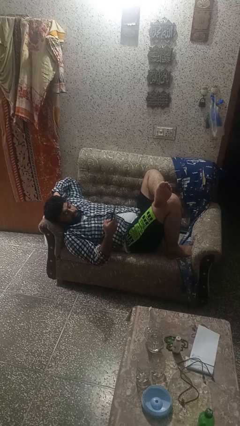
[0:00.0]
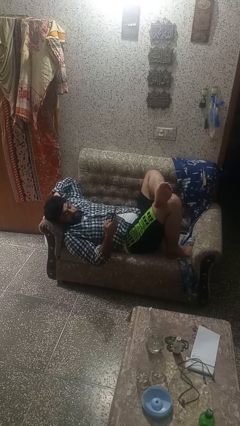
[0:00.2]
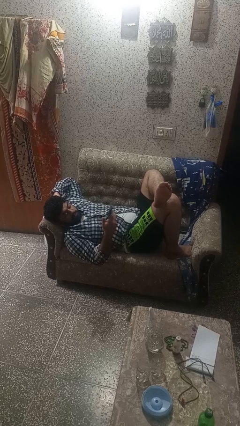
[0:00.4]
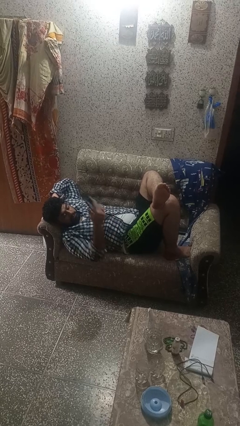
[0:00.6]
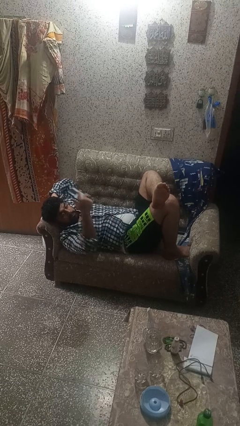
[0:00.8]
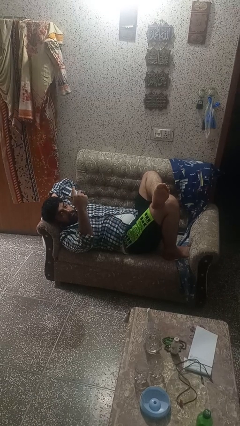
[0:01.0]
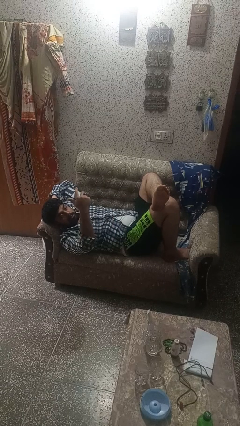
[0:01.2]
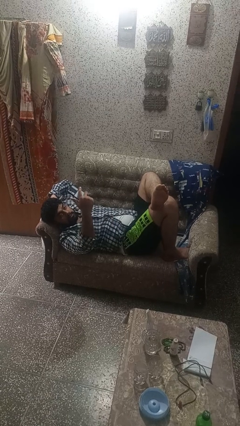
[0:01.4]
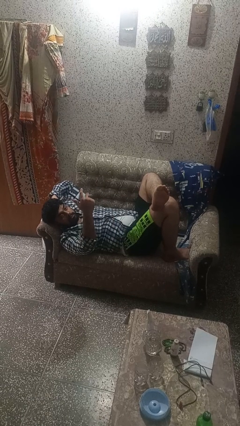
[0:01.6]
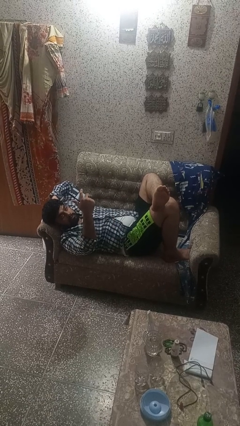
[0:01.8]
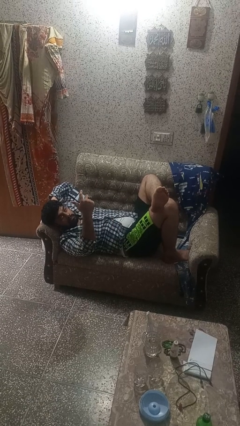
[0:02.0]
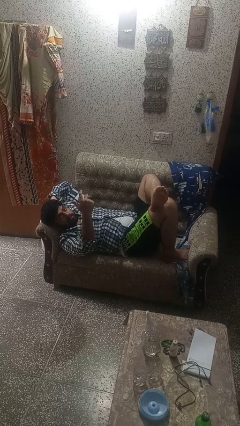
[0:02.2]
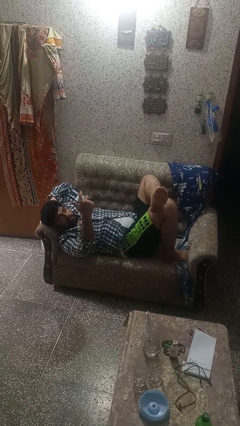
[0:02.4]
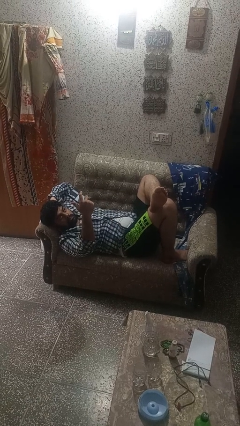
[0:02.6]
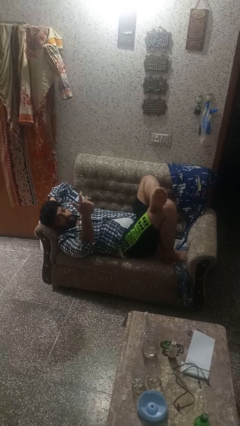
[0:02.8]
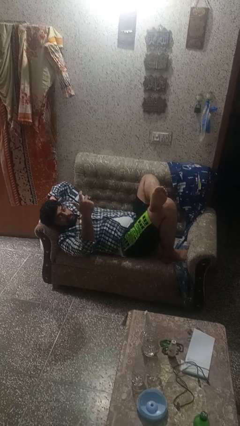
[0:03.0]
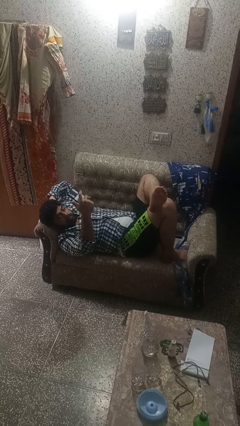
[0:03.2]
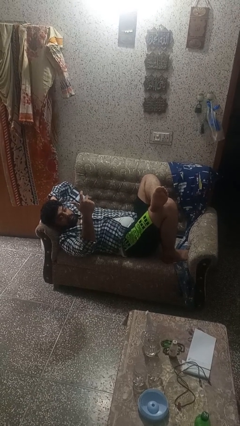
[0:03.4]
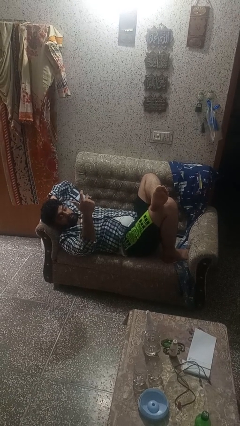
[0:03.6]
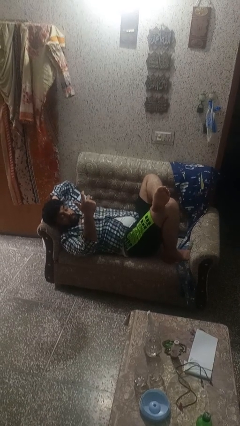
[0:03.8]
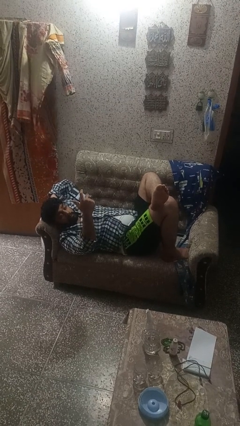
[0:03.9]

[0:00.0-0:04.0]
person takes selfie

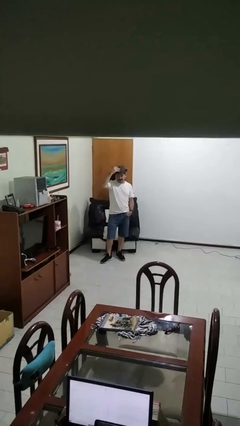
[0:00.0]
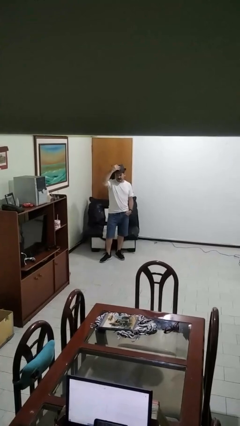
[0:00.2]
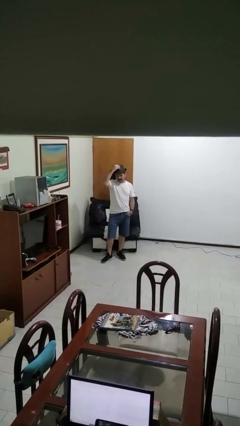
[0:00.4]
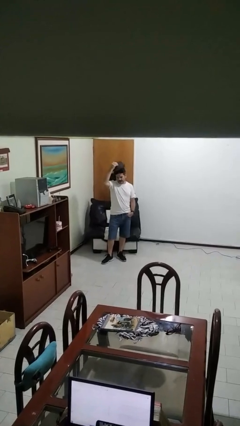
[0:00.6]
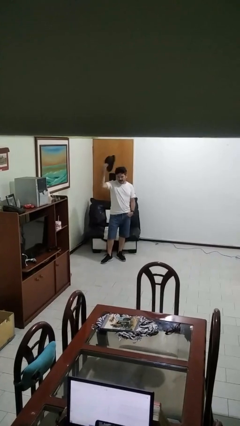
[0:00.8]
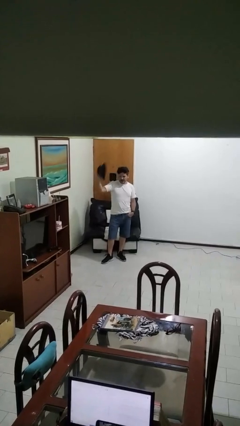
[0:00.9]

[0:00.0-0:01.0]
person takes off hat

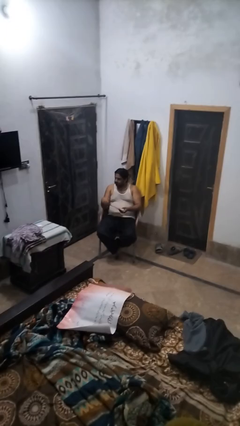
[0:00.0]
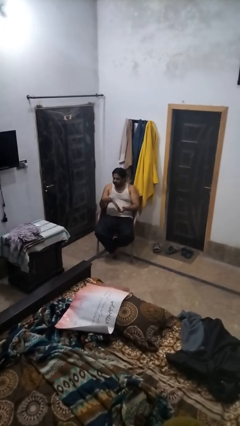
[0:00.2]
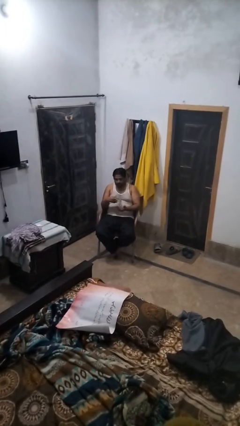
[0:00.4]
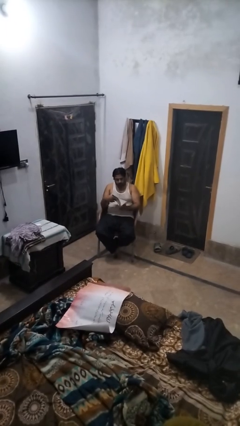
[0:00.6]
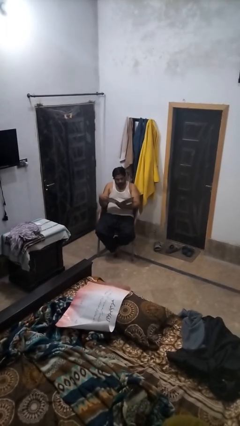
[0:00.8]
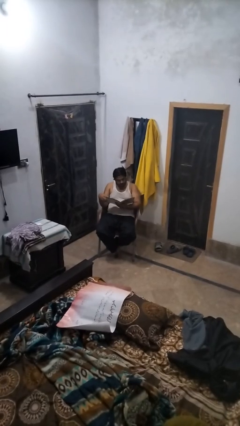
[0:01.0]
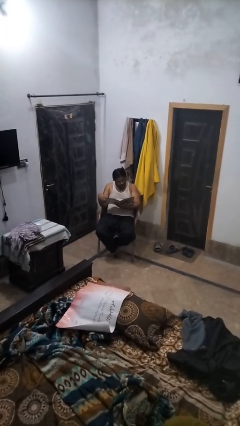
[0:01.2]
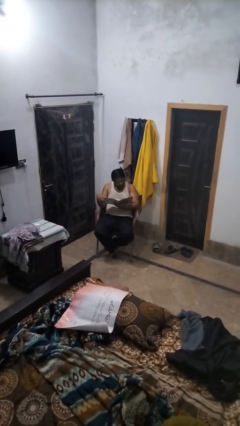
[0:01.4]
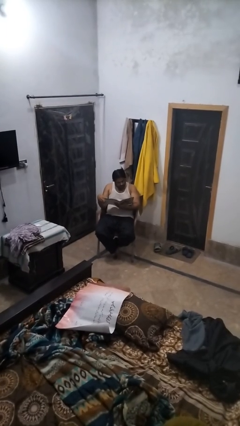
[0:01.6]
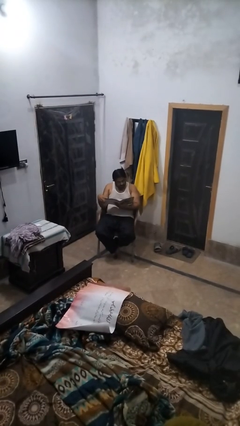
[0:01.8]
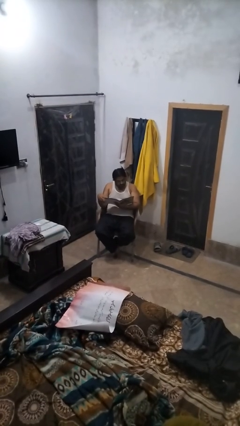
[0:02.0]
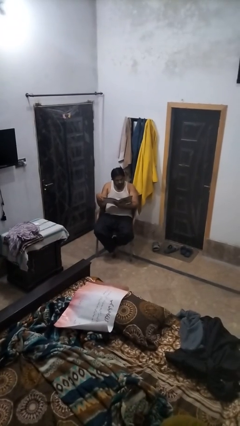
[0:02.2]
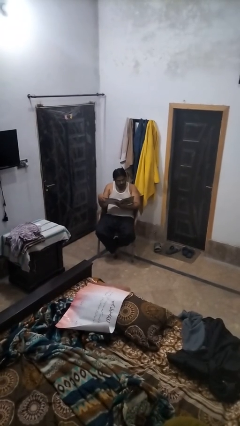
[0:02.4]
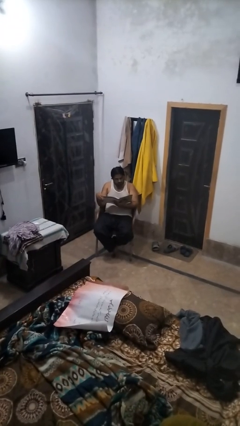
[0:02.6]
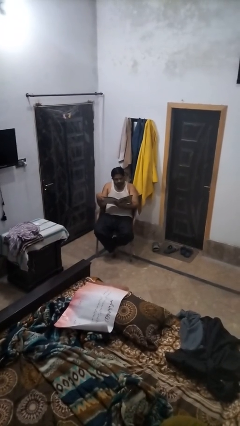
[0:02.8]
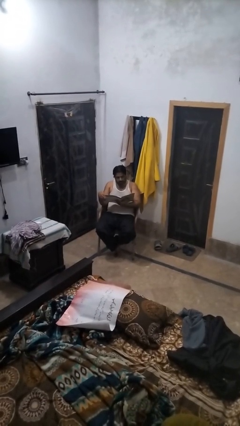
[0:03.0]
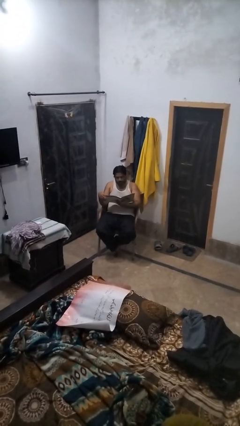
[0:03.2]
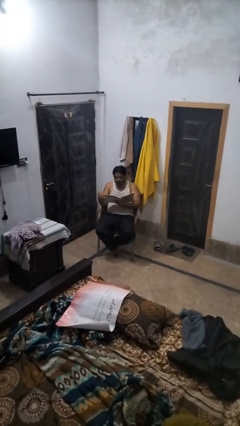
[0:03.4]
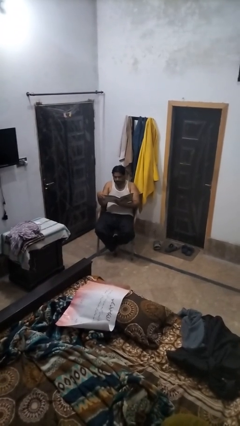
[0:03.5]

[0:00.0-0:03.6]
person reads magazine

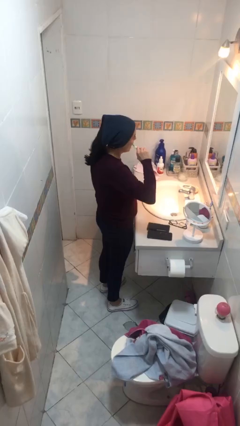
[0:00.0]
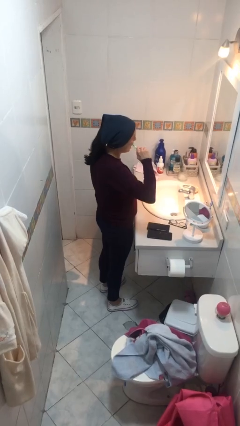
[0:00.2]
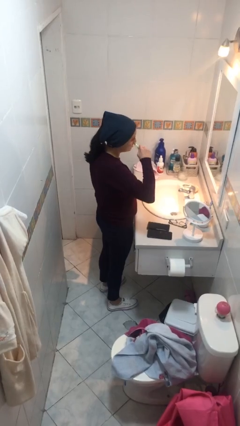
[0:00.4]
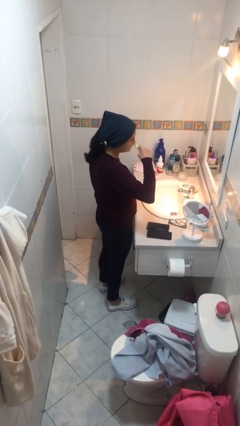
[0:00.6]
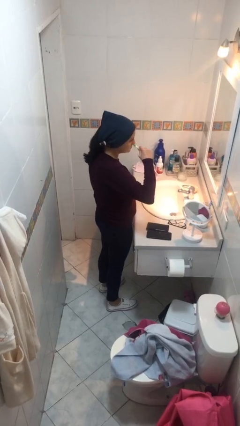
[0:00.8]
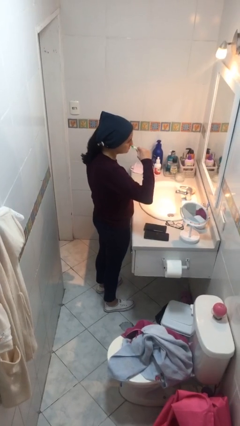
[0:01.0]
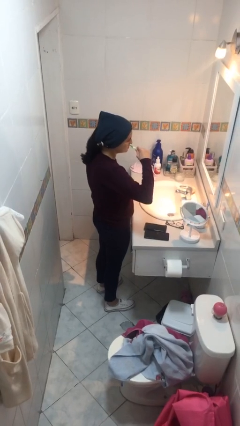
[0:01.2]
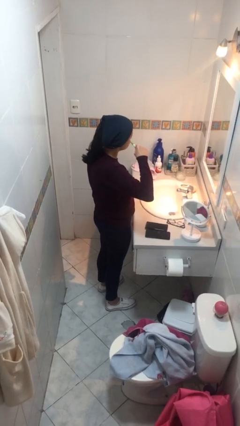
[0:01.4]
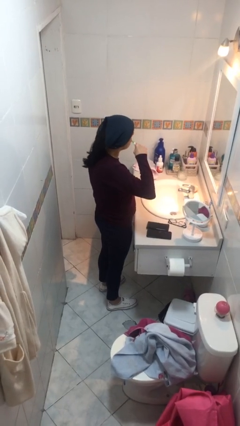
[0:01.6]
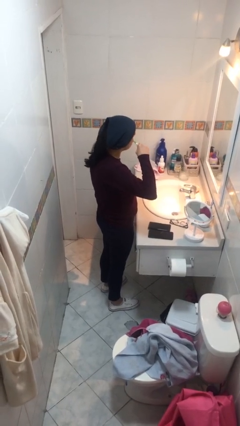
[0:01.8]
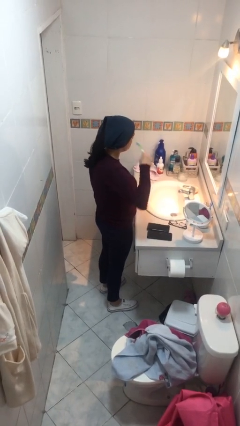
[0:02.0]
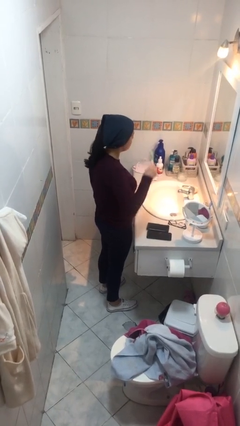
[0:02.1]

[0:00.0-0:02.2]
person brushes teeth

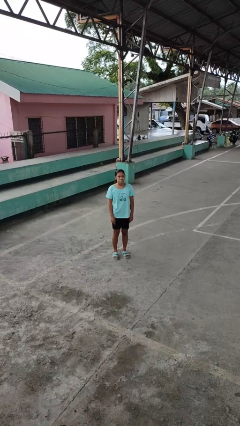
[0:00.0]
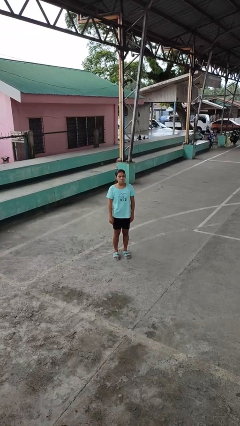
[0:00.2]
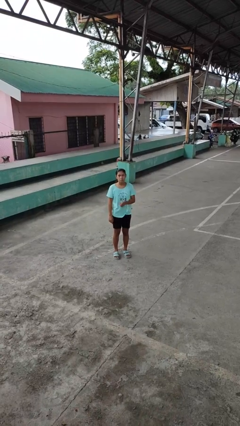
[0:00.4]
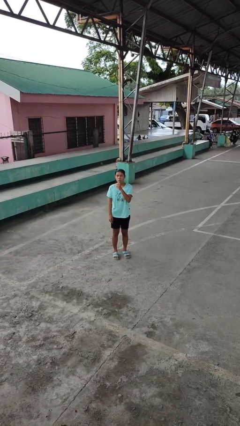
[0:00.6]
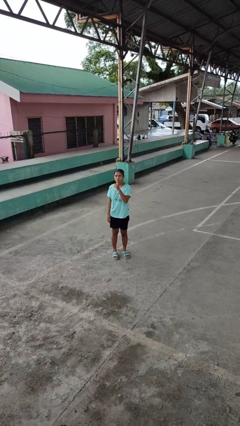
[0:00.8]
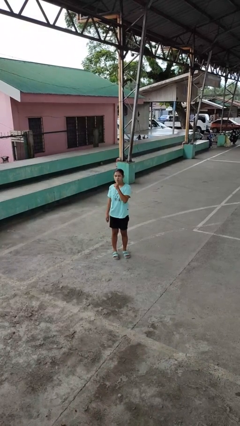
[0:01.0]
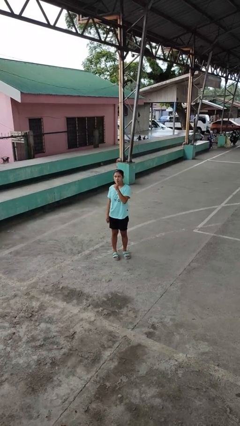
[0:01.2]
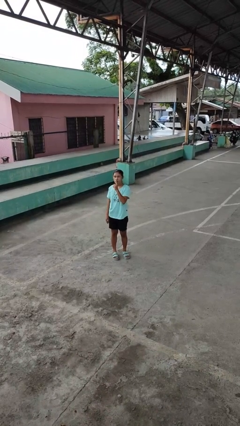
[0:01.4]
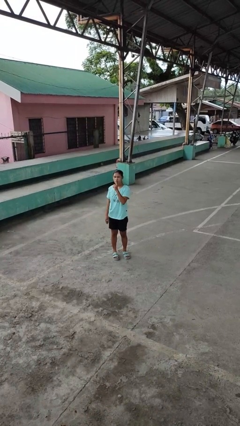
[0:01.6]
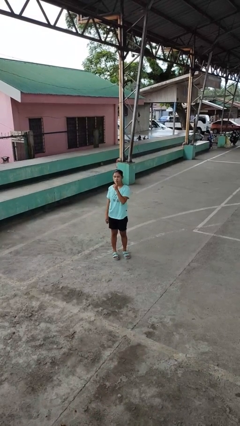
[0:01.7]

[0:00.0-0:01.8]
person gestures be quiet

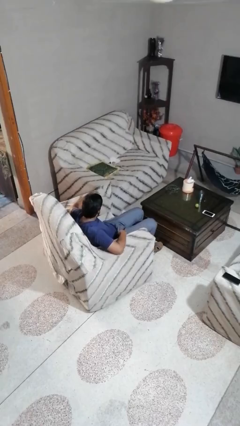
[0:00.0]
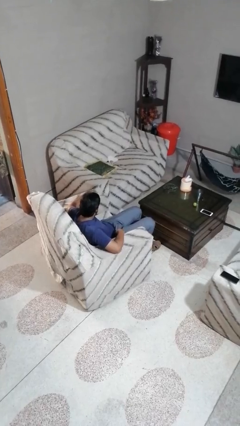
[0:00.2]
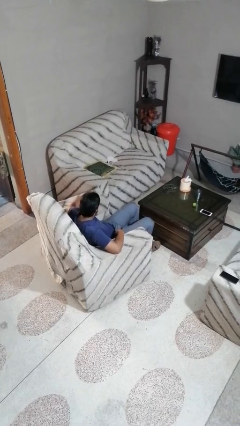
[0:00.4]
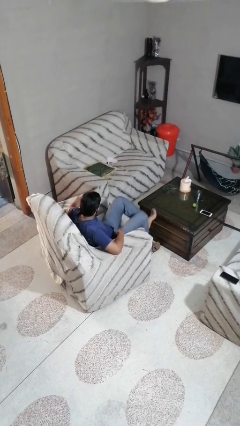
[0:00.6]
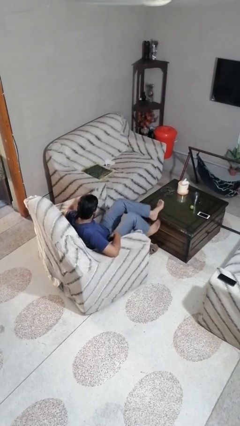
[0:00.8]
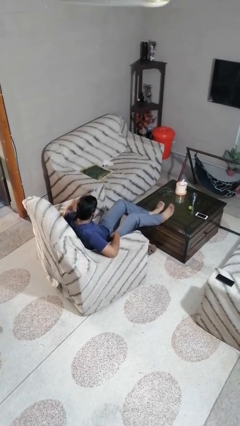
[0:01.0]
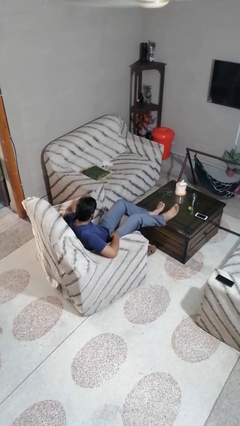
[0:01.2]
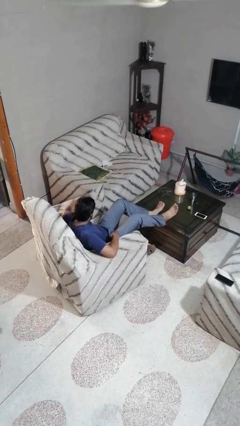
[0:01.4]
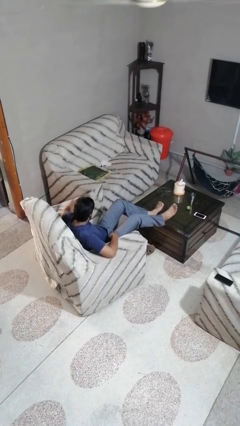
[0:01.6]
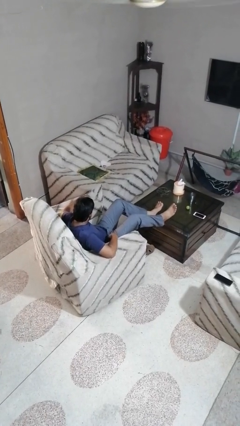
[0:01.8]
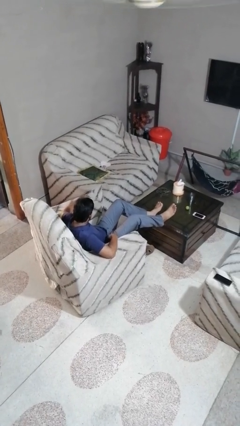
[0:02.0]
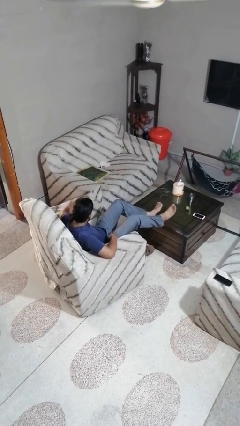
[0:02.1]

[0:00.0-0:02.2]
person puts feet up

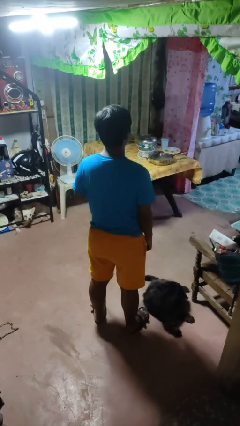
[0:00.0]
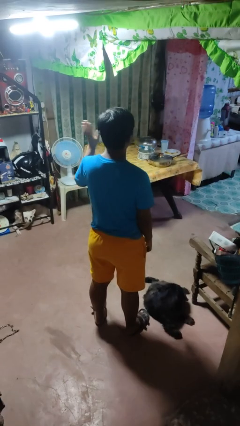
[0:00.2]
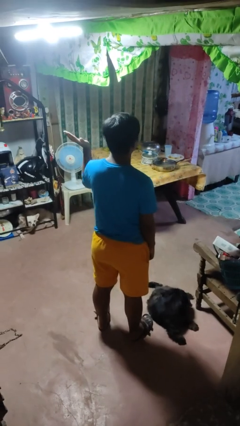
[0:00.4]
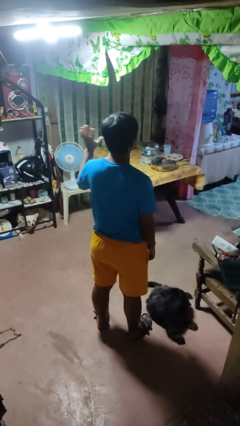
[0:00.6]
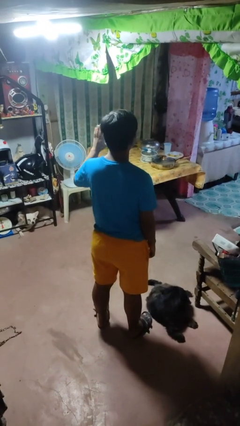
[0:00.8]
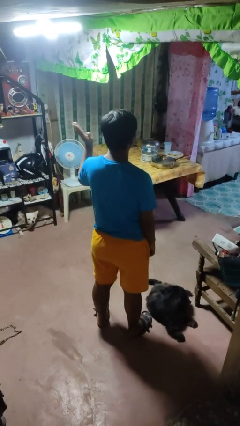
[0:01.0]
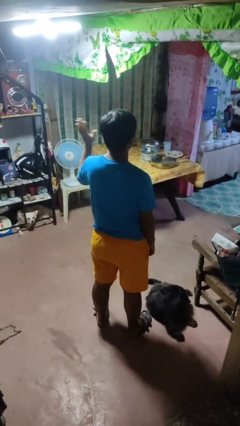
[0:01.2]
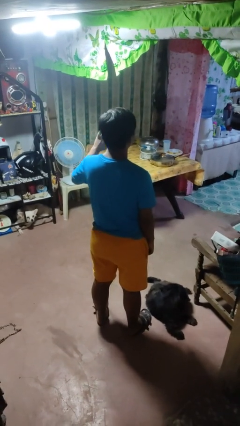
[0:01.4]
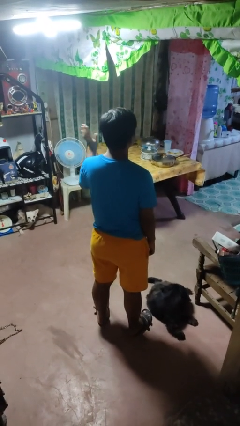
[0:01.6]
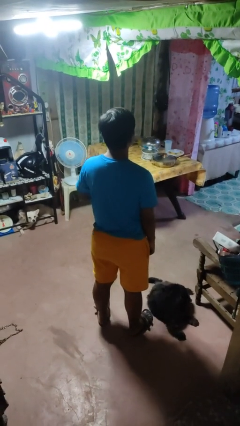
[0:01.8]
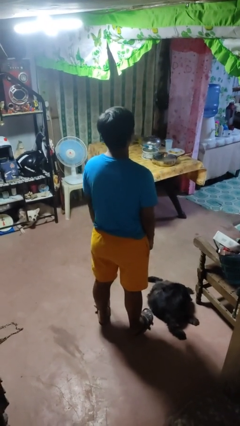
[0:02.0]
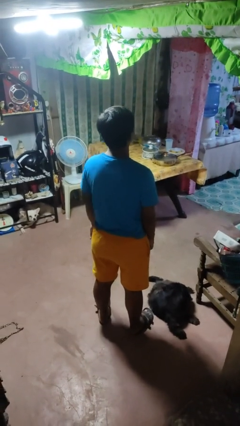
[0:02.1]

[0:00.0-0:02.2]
person waves at person
